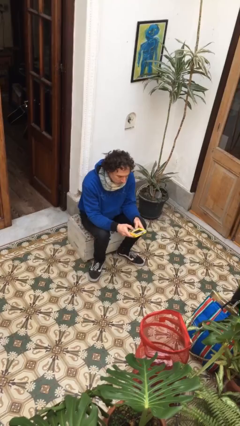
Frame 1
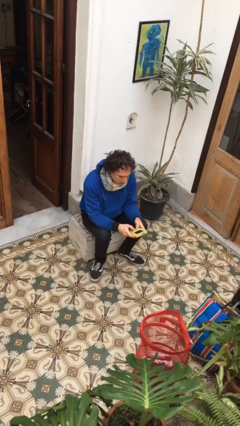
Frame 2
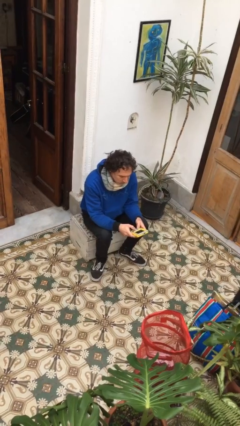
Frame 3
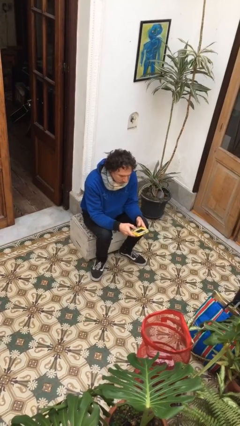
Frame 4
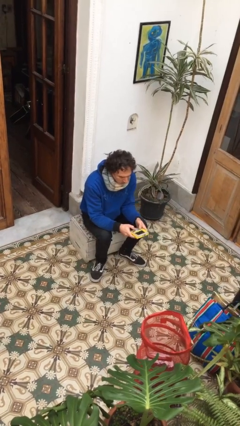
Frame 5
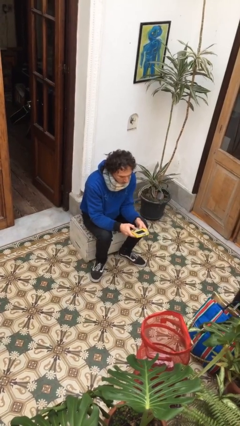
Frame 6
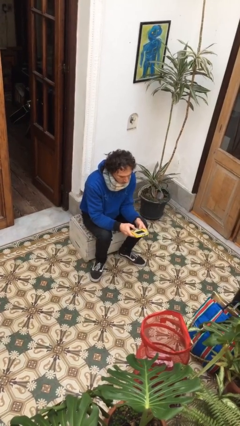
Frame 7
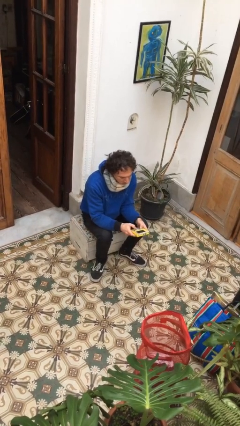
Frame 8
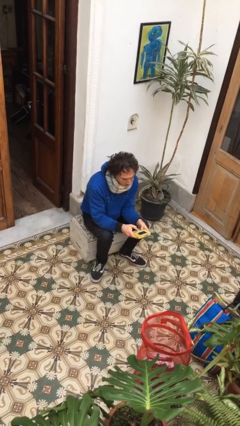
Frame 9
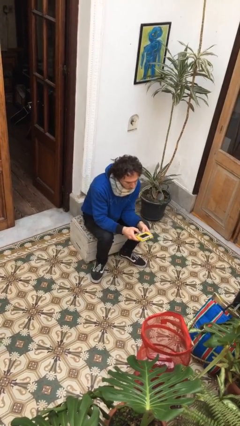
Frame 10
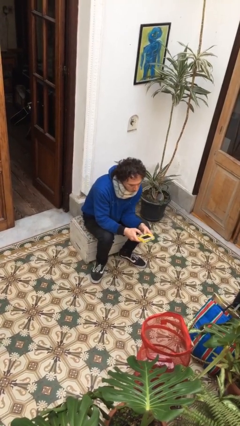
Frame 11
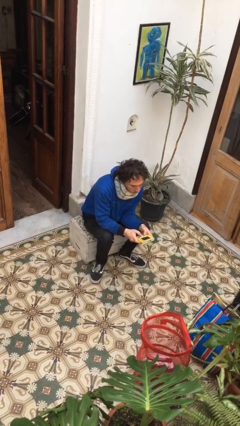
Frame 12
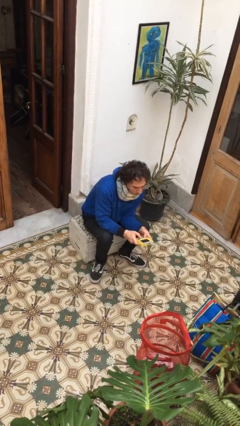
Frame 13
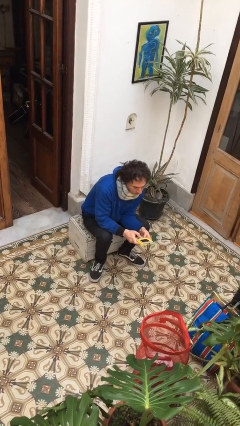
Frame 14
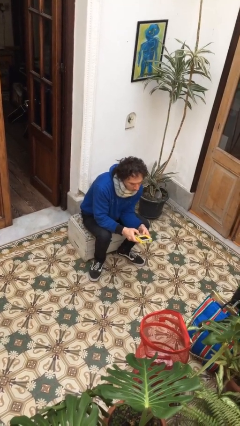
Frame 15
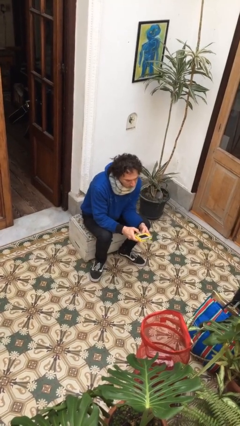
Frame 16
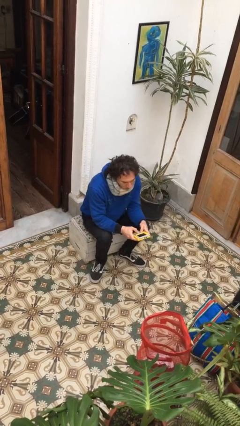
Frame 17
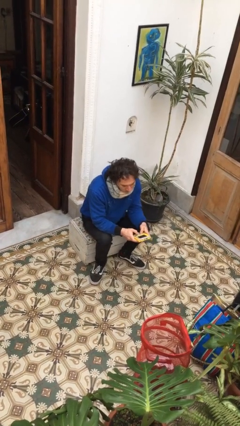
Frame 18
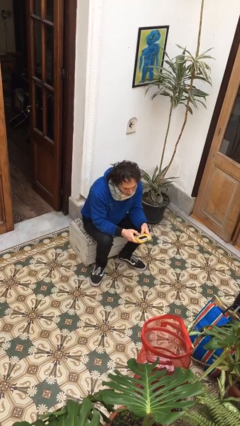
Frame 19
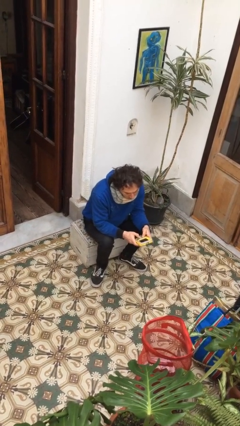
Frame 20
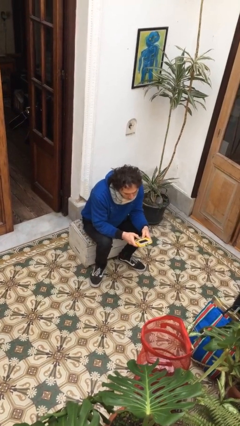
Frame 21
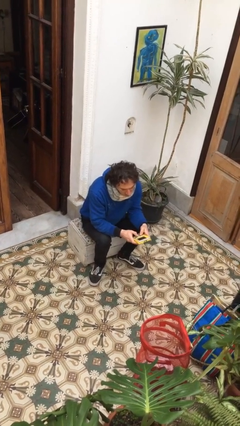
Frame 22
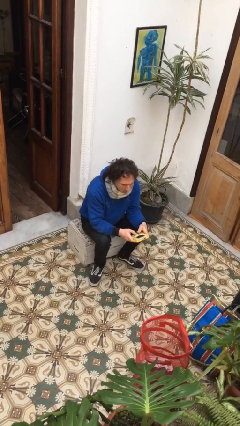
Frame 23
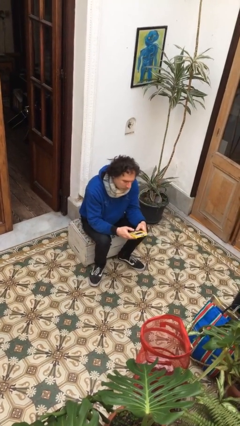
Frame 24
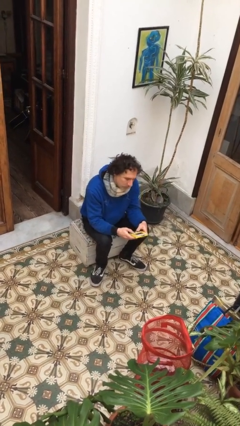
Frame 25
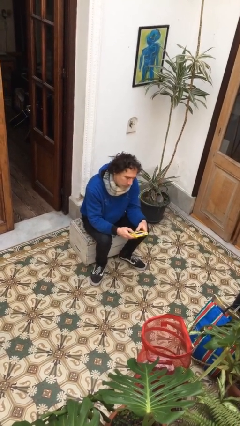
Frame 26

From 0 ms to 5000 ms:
person interacts with handheld game

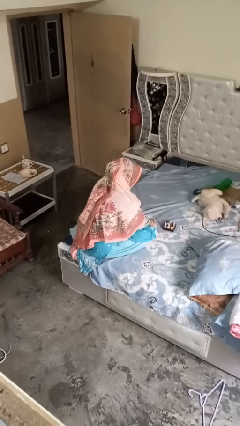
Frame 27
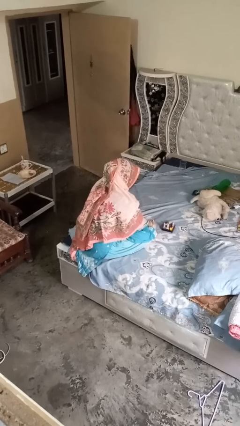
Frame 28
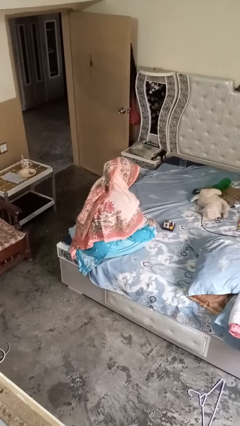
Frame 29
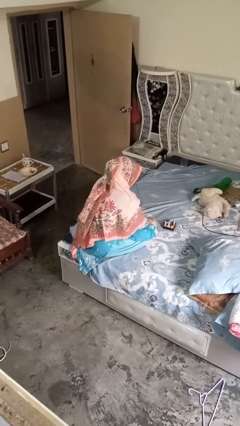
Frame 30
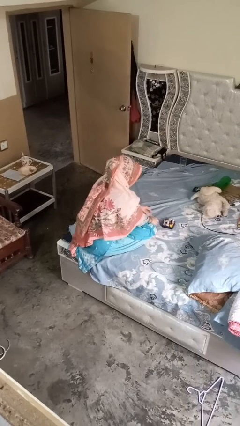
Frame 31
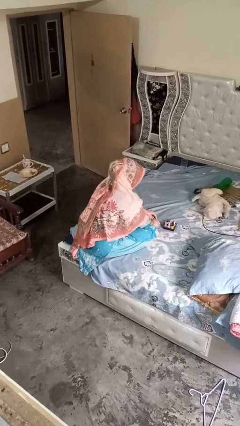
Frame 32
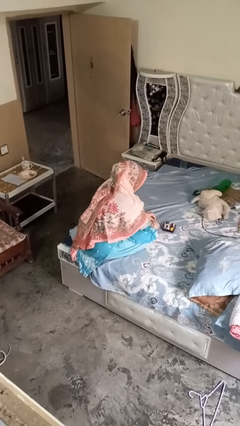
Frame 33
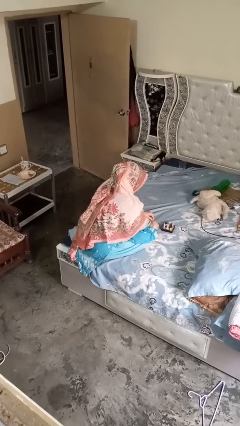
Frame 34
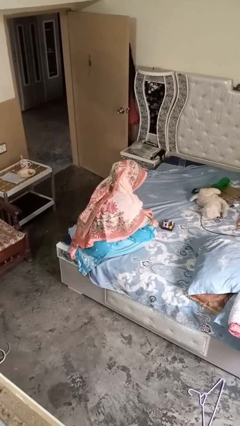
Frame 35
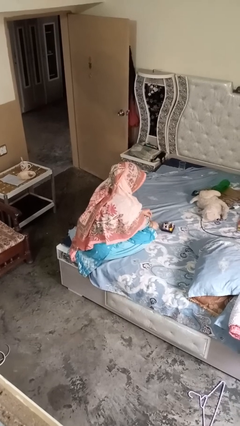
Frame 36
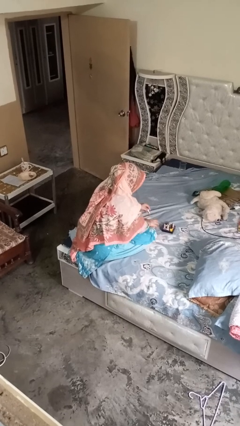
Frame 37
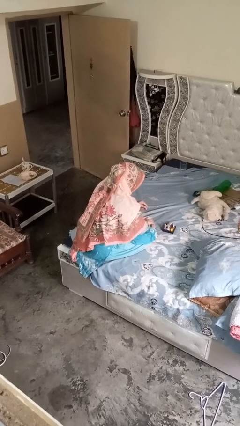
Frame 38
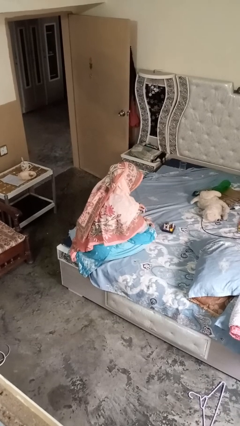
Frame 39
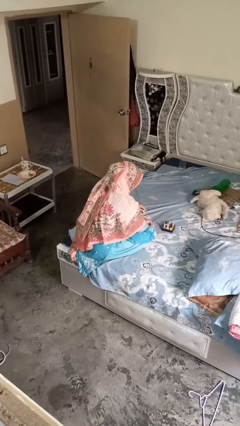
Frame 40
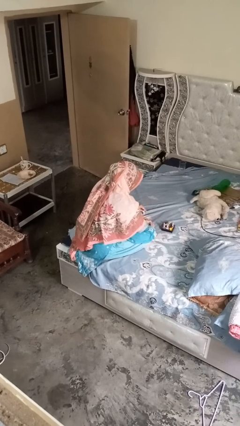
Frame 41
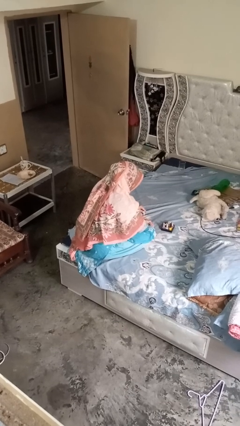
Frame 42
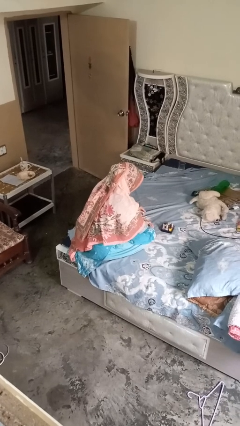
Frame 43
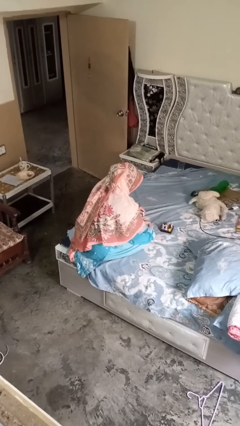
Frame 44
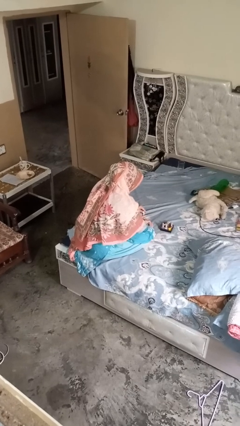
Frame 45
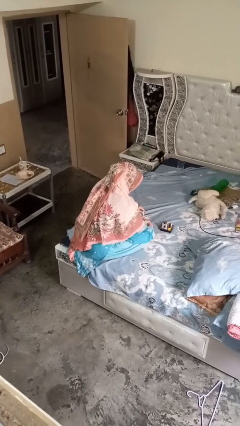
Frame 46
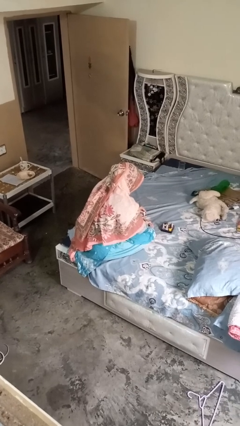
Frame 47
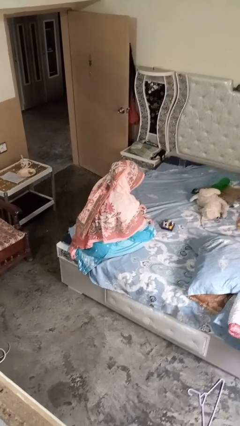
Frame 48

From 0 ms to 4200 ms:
person paints fingernails

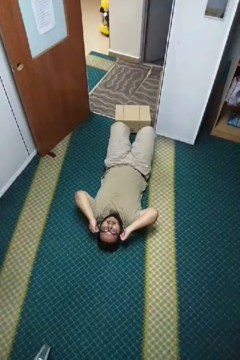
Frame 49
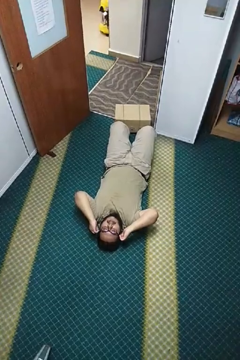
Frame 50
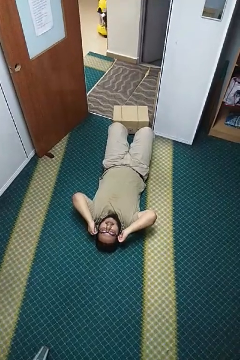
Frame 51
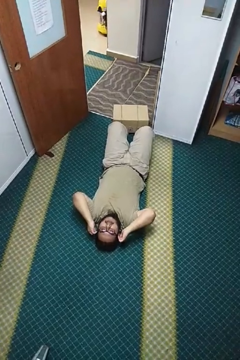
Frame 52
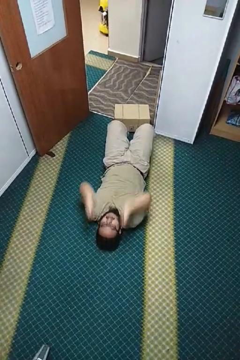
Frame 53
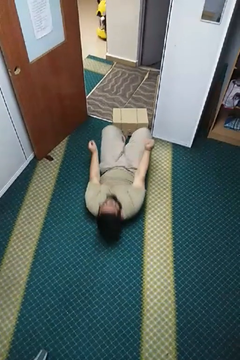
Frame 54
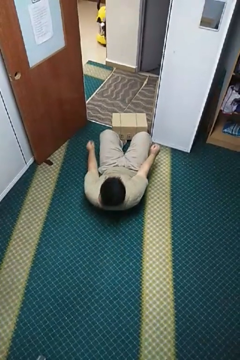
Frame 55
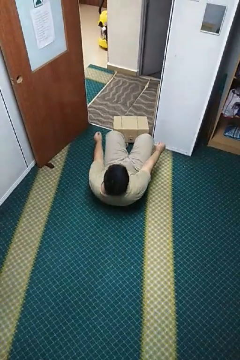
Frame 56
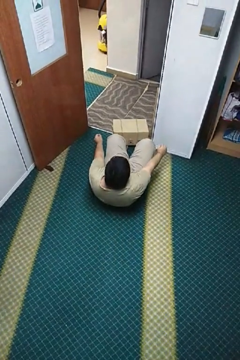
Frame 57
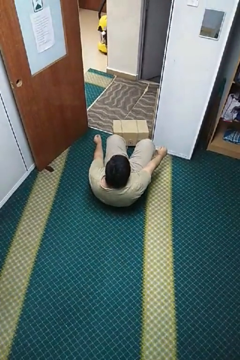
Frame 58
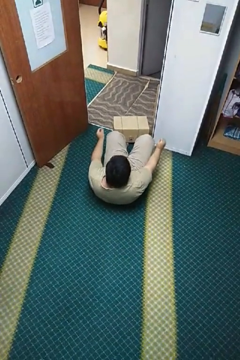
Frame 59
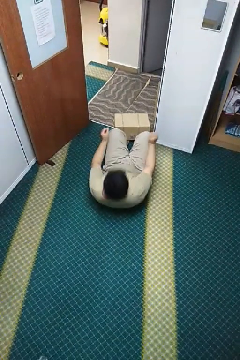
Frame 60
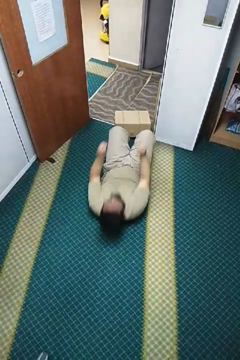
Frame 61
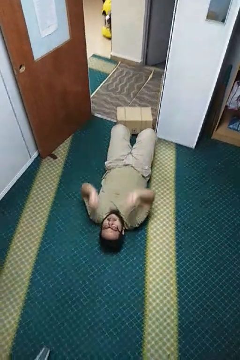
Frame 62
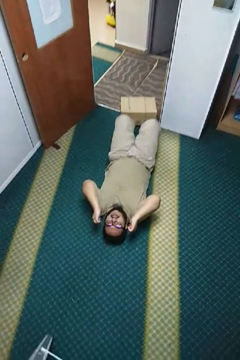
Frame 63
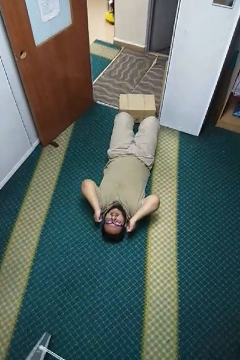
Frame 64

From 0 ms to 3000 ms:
person exercises with situp

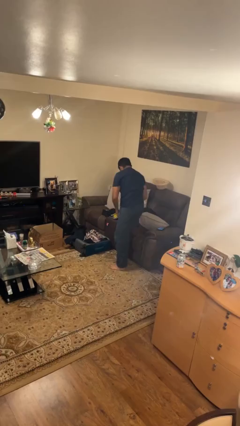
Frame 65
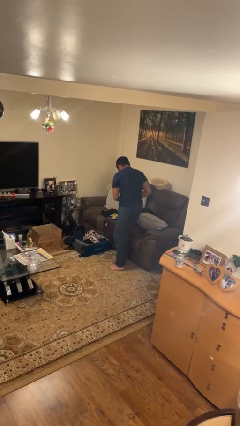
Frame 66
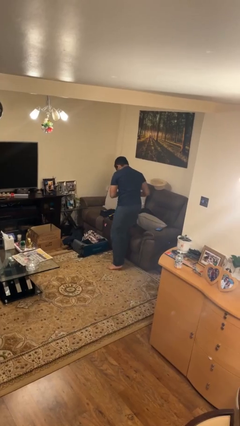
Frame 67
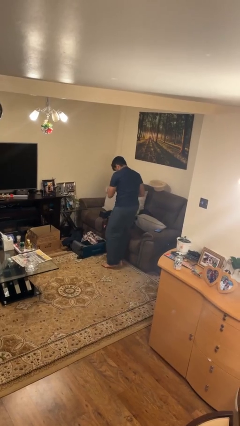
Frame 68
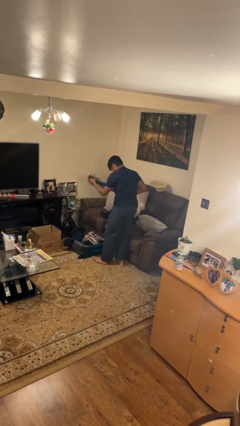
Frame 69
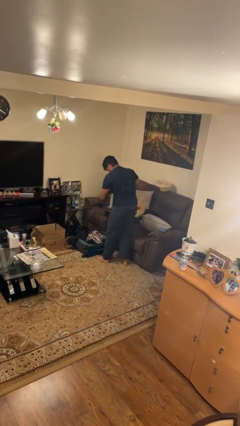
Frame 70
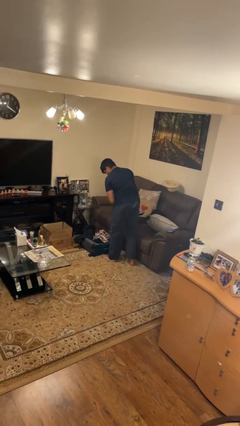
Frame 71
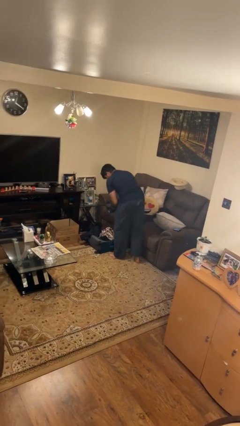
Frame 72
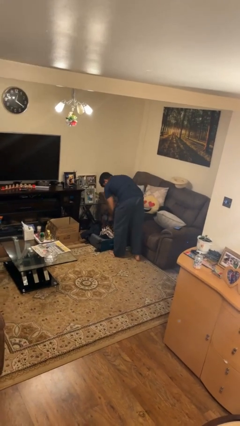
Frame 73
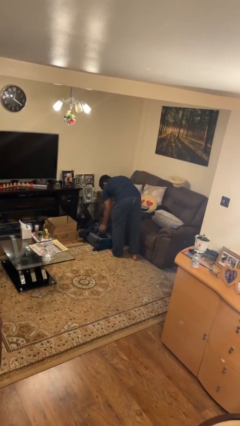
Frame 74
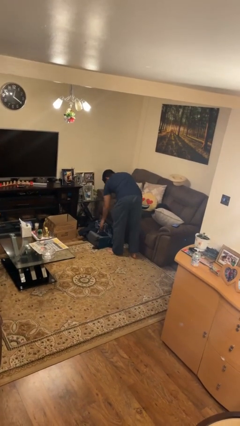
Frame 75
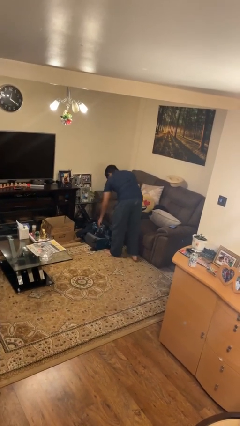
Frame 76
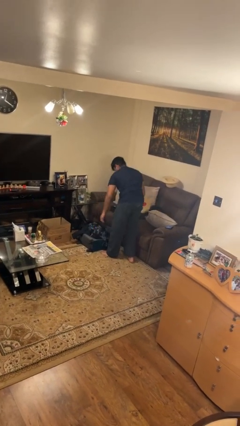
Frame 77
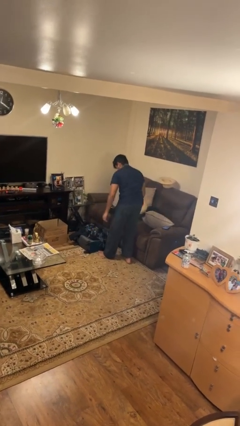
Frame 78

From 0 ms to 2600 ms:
person loads clothes into suitcase

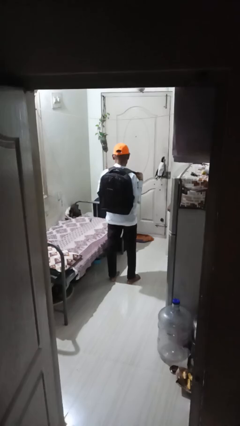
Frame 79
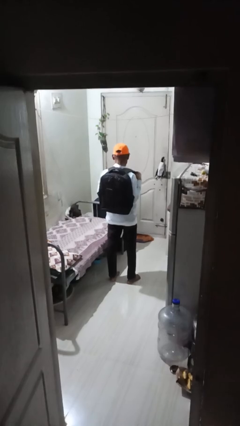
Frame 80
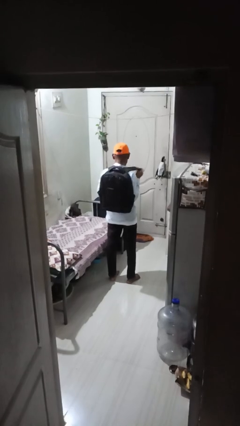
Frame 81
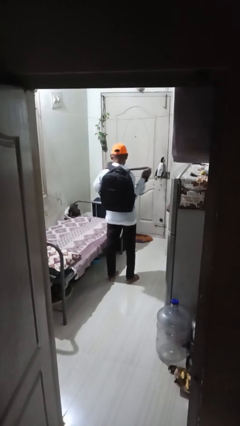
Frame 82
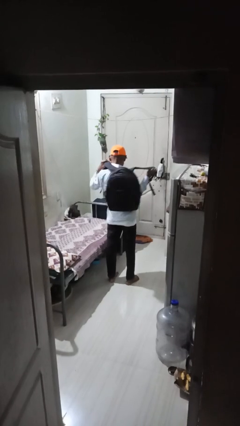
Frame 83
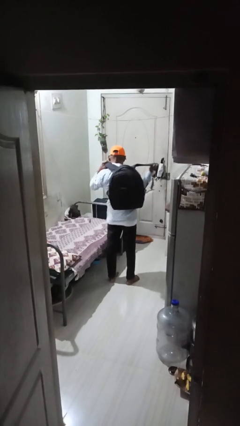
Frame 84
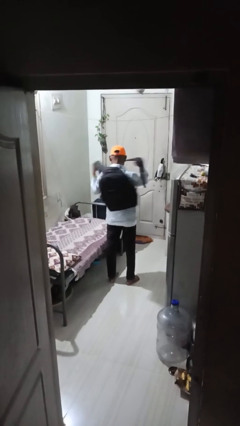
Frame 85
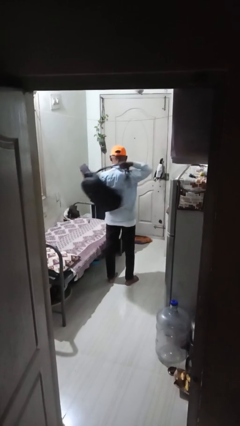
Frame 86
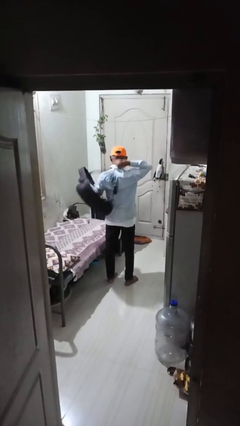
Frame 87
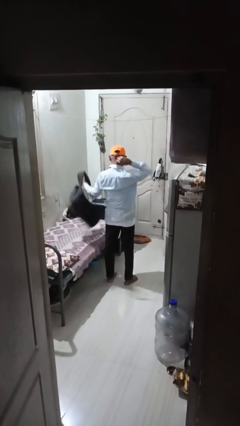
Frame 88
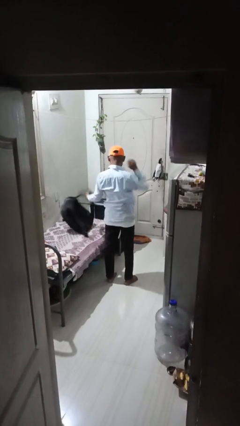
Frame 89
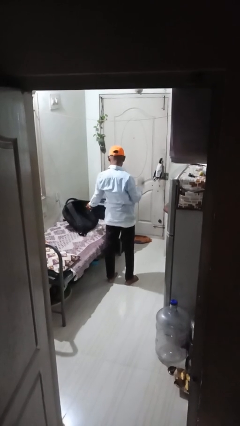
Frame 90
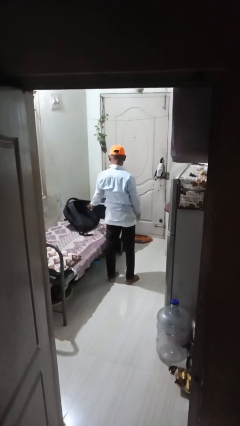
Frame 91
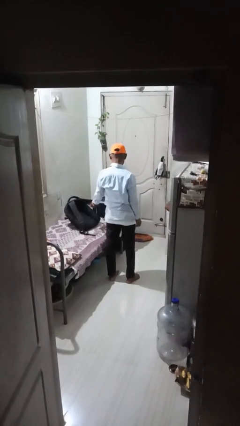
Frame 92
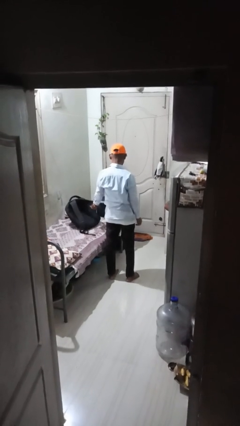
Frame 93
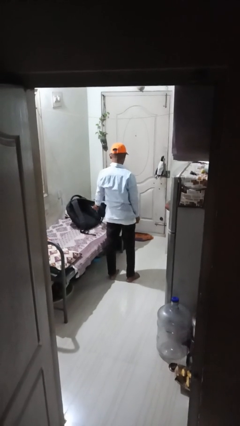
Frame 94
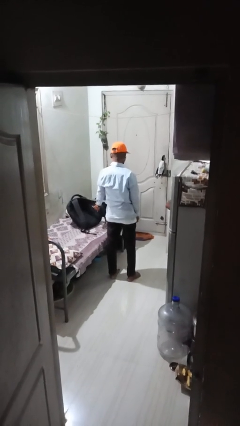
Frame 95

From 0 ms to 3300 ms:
person takes off backpack
